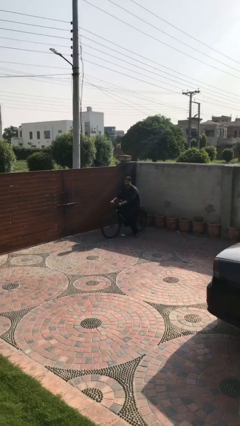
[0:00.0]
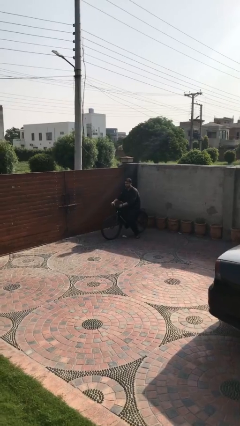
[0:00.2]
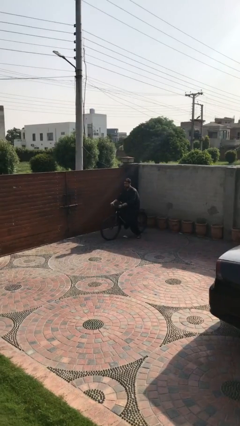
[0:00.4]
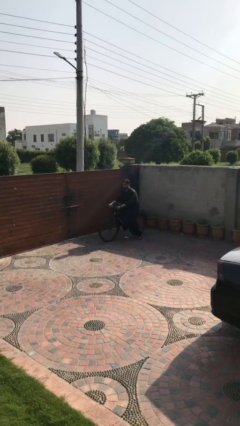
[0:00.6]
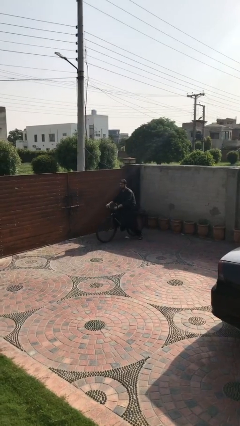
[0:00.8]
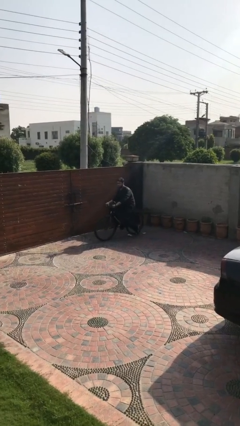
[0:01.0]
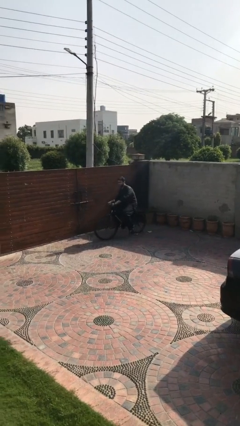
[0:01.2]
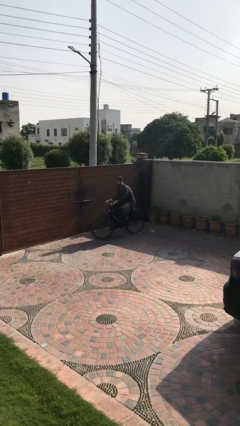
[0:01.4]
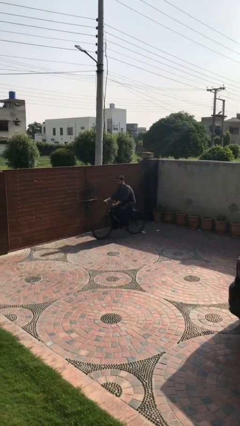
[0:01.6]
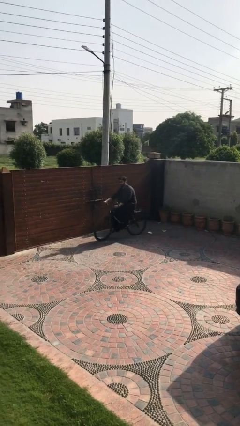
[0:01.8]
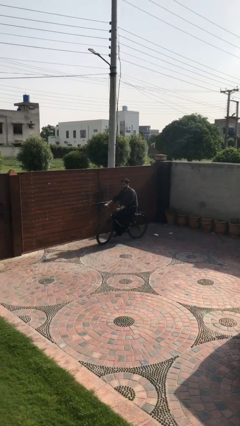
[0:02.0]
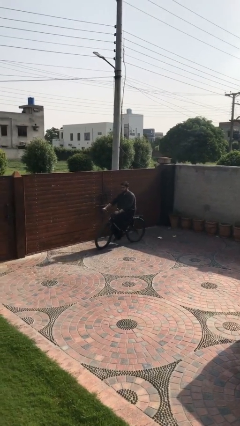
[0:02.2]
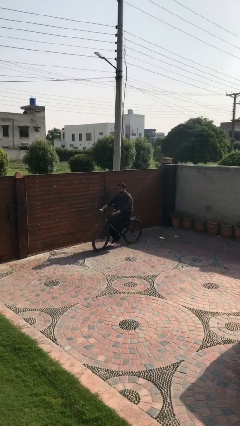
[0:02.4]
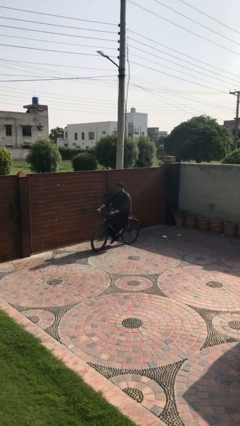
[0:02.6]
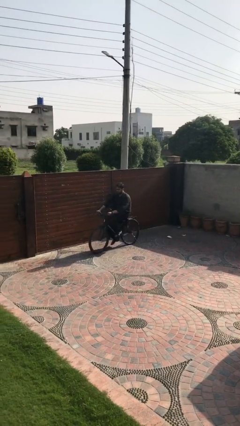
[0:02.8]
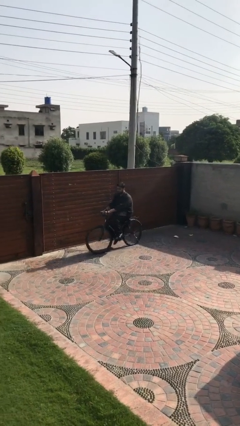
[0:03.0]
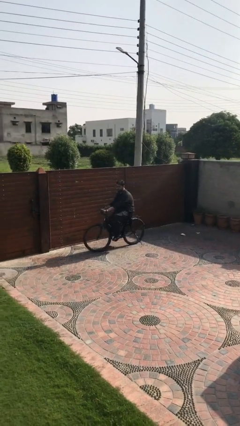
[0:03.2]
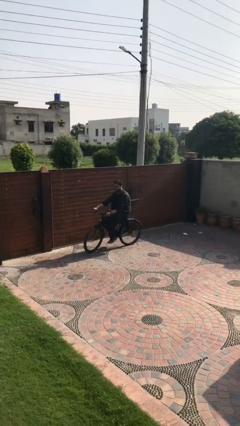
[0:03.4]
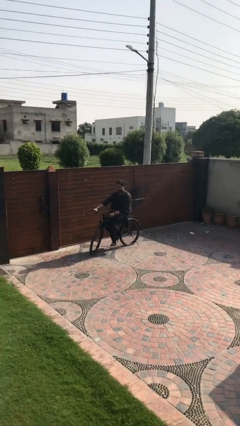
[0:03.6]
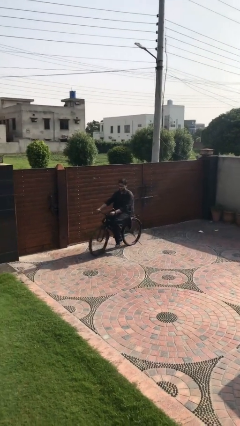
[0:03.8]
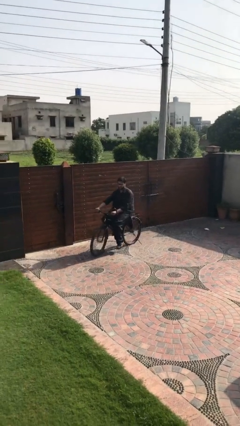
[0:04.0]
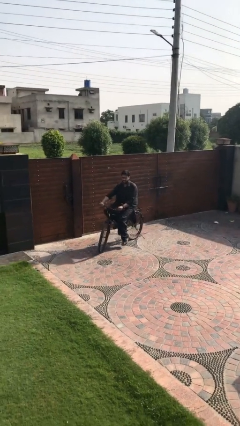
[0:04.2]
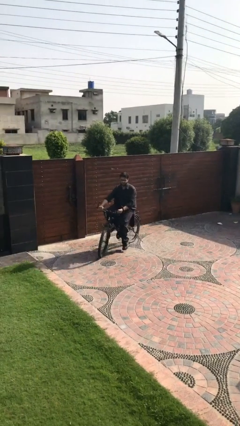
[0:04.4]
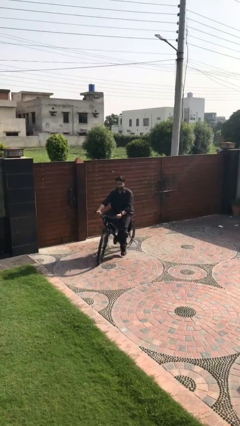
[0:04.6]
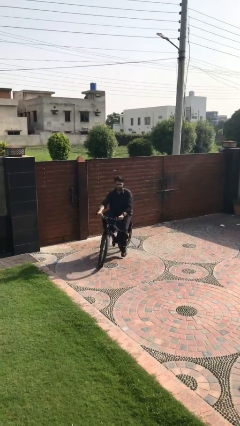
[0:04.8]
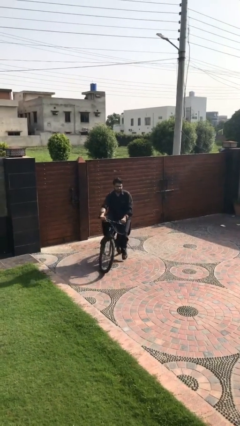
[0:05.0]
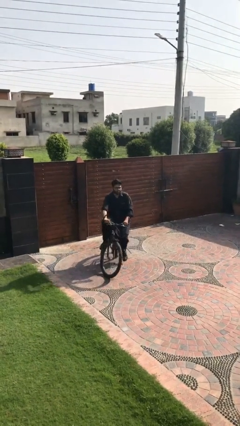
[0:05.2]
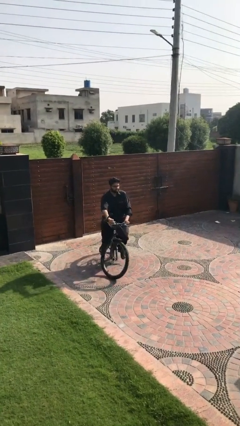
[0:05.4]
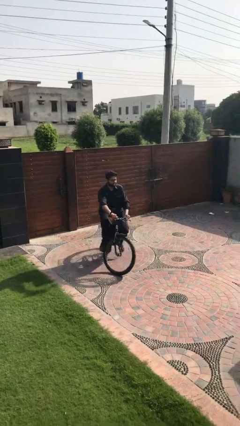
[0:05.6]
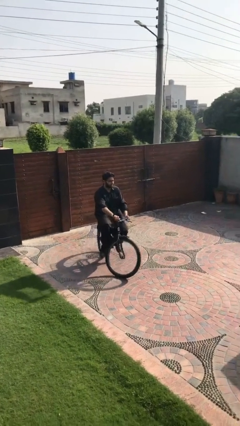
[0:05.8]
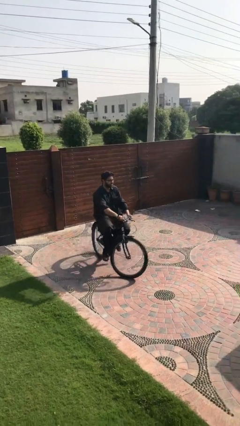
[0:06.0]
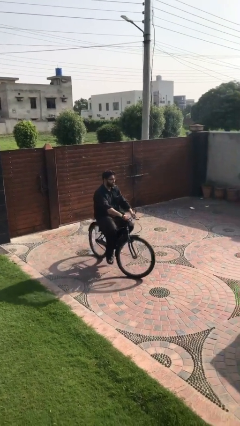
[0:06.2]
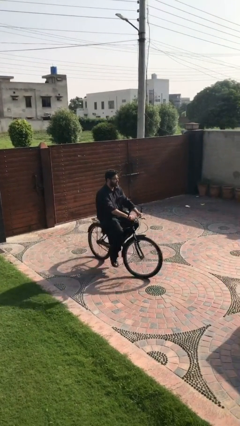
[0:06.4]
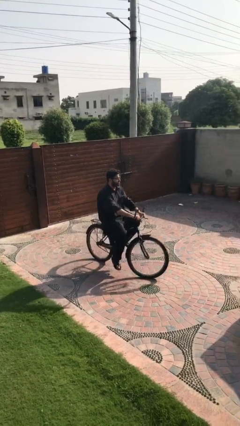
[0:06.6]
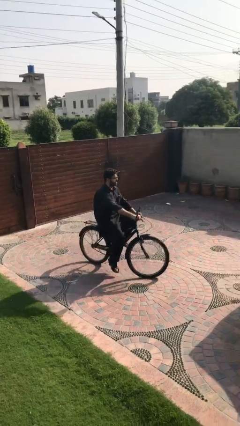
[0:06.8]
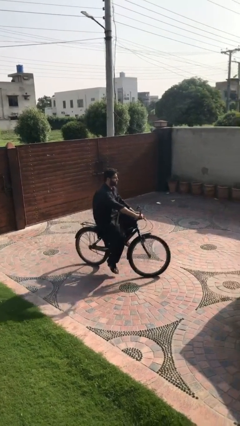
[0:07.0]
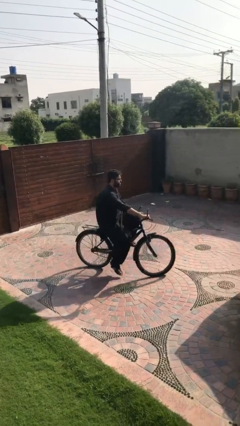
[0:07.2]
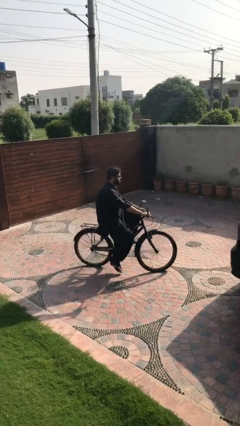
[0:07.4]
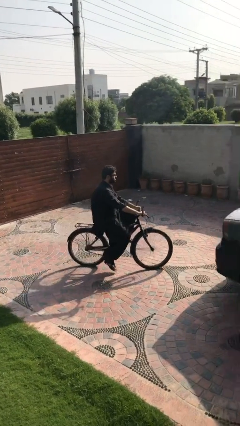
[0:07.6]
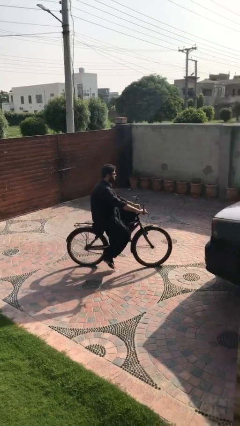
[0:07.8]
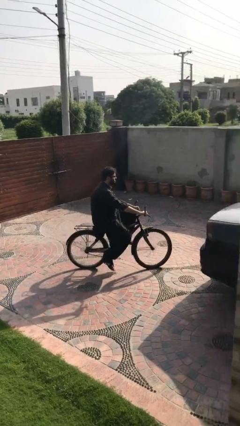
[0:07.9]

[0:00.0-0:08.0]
person rides bicycle

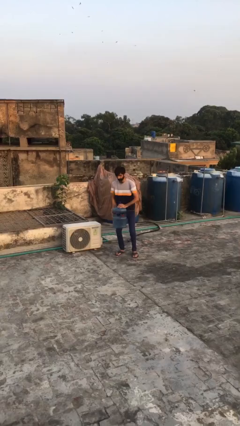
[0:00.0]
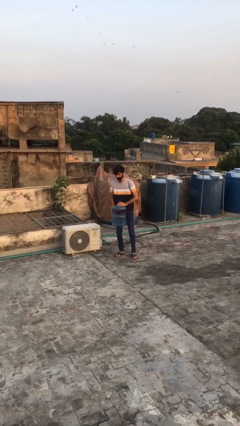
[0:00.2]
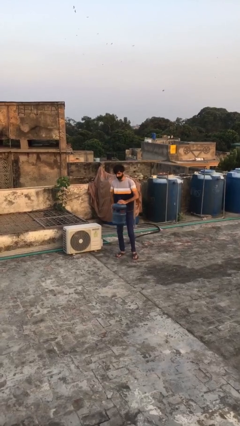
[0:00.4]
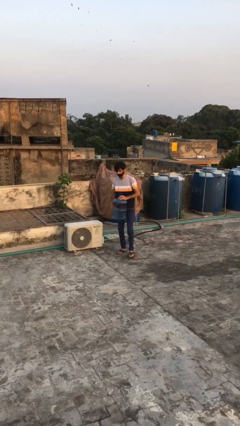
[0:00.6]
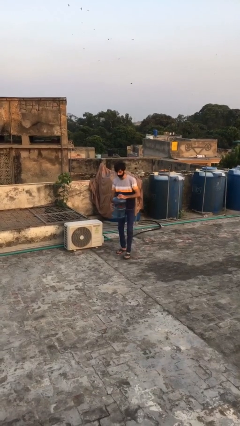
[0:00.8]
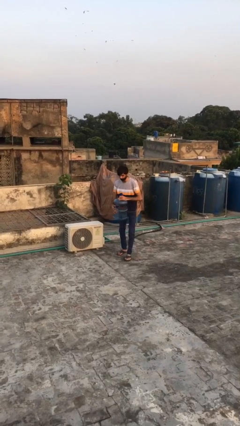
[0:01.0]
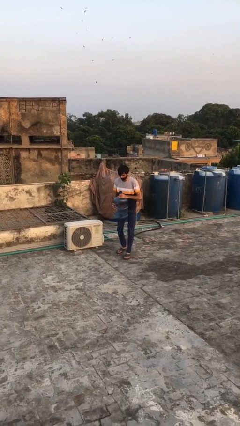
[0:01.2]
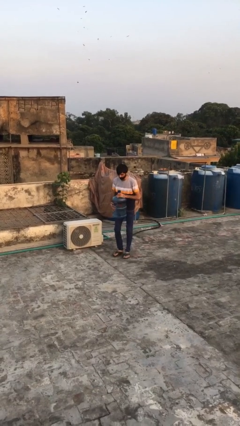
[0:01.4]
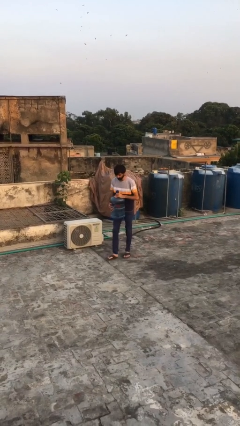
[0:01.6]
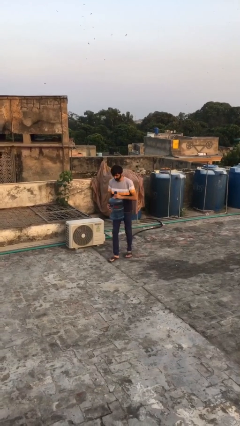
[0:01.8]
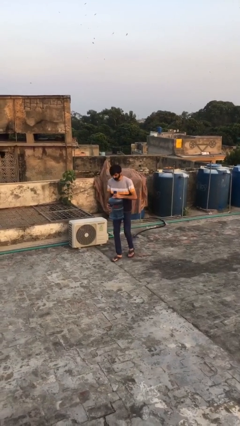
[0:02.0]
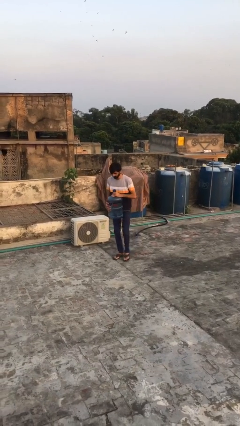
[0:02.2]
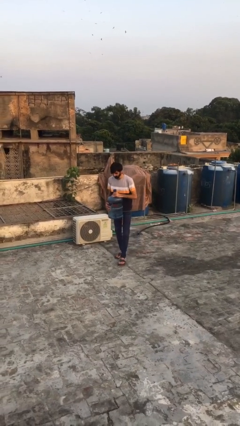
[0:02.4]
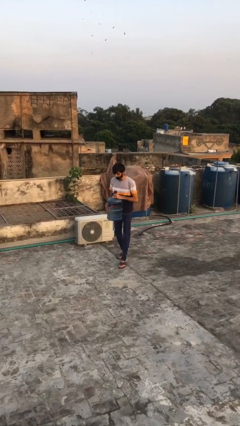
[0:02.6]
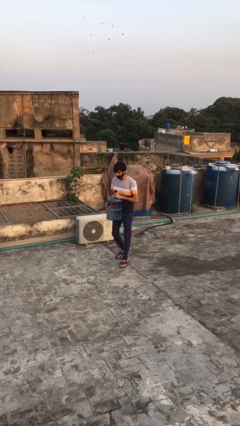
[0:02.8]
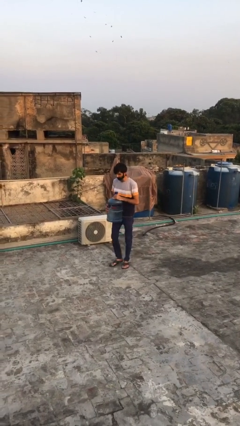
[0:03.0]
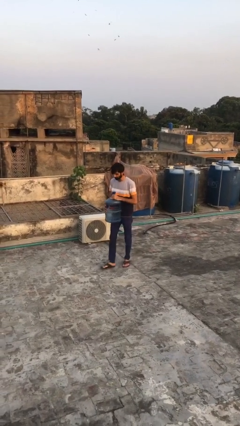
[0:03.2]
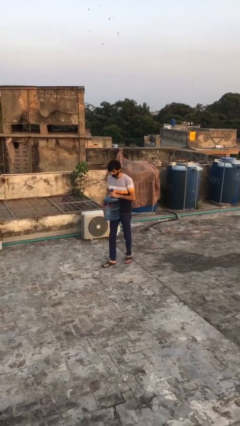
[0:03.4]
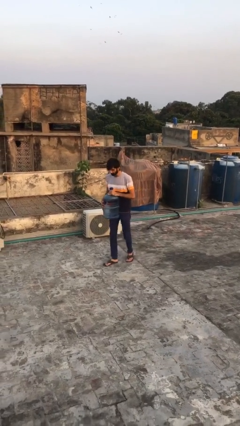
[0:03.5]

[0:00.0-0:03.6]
person carries heavy object

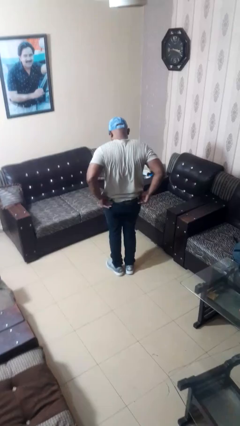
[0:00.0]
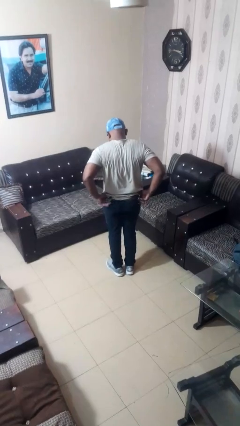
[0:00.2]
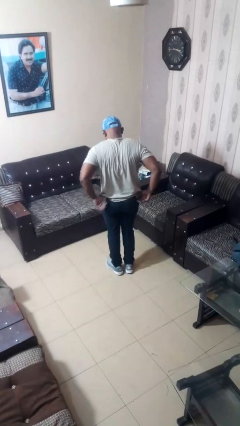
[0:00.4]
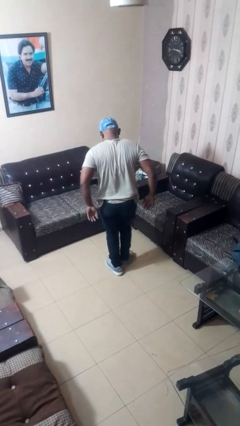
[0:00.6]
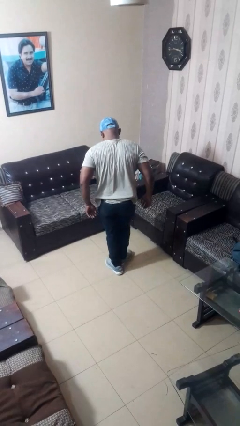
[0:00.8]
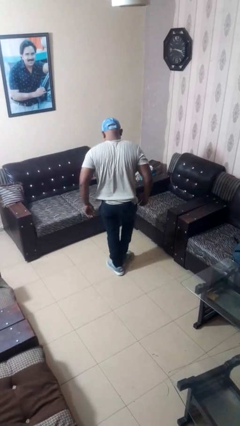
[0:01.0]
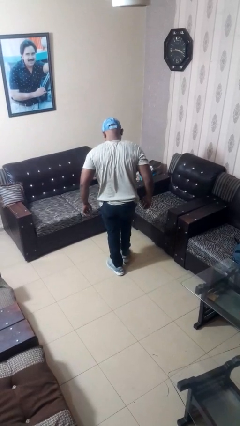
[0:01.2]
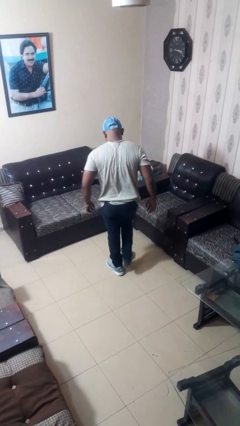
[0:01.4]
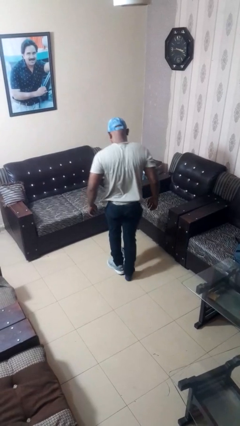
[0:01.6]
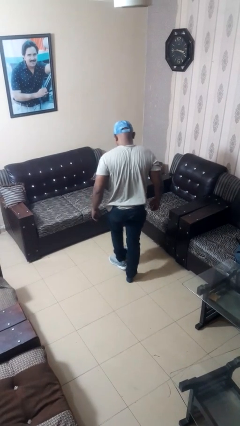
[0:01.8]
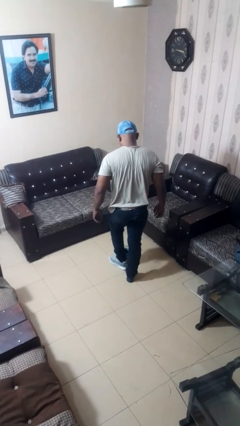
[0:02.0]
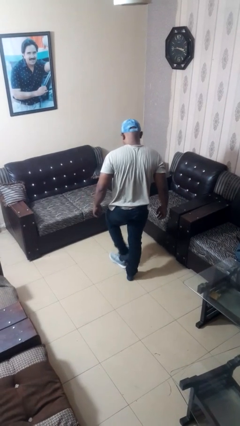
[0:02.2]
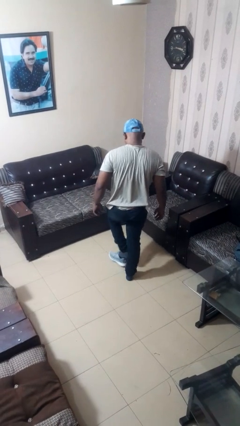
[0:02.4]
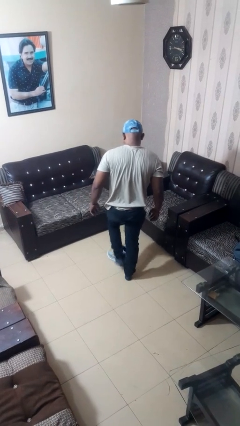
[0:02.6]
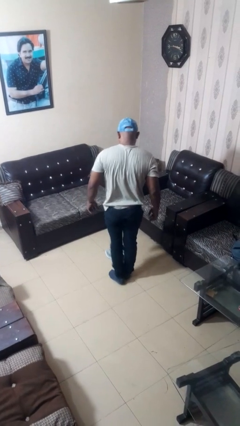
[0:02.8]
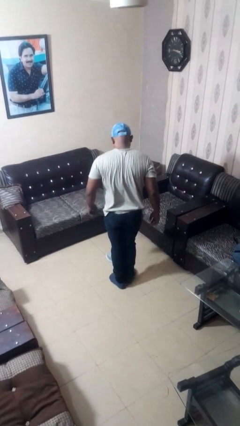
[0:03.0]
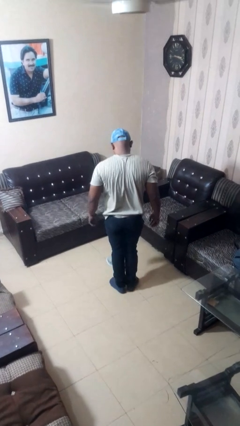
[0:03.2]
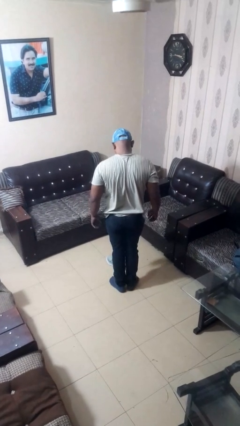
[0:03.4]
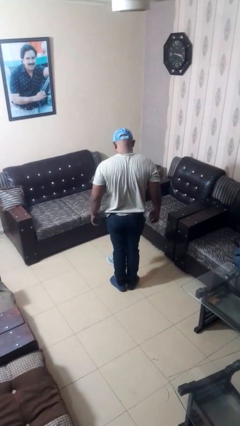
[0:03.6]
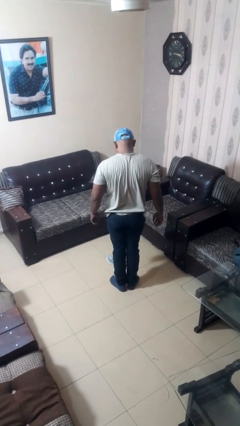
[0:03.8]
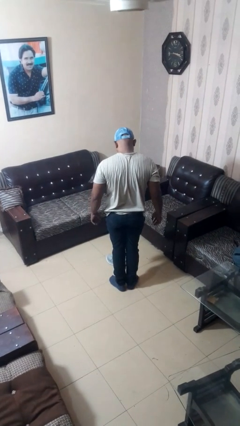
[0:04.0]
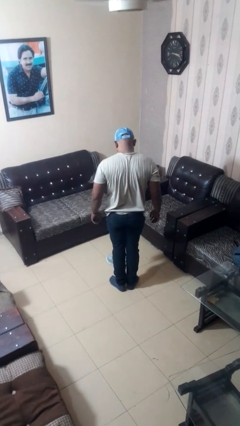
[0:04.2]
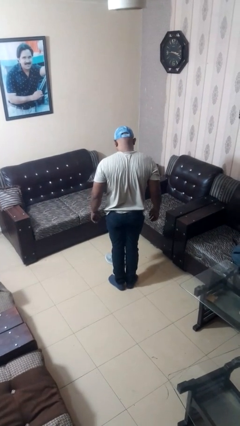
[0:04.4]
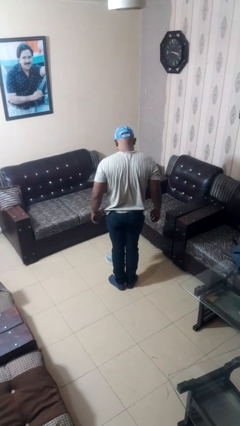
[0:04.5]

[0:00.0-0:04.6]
person takes off shoes

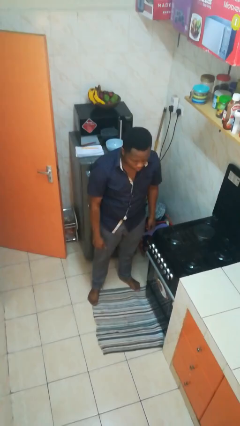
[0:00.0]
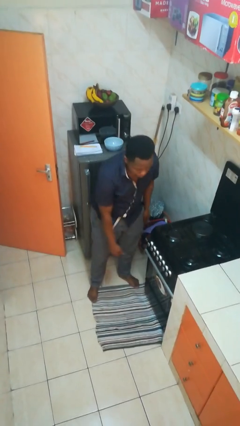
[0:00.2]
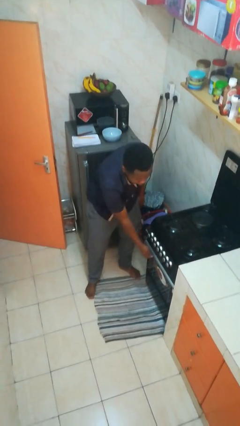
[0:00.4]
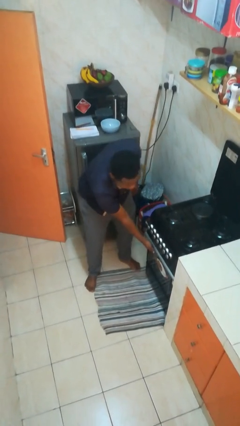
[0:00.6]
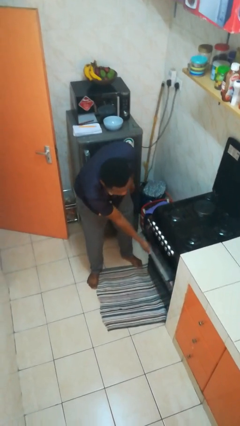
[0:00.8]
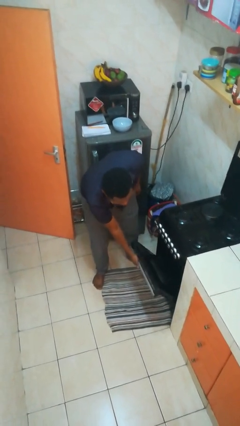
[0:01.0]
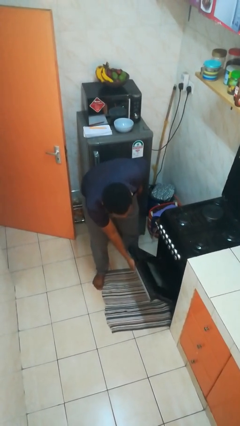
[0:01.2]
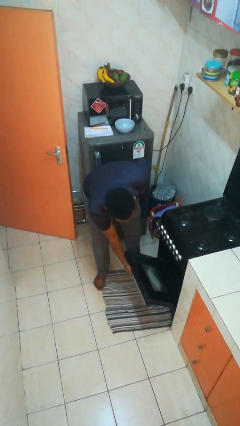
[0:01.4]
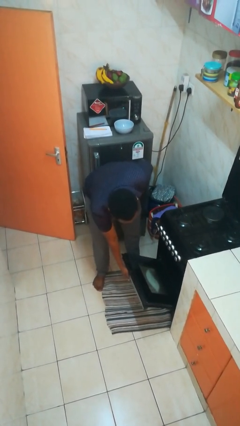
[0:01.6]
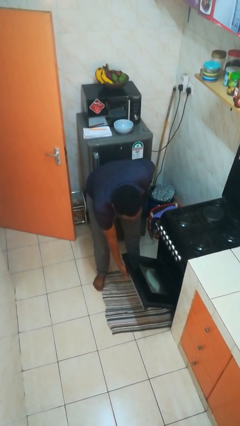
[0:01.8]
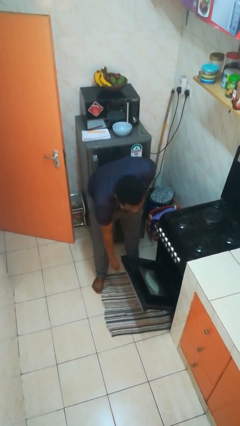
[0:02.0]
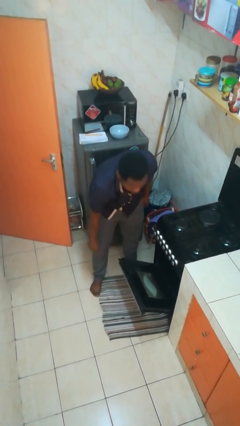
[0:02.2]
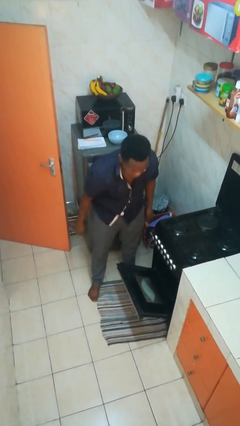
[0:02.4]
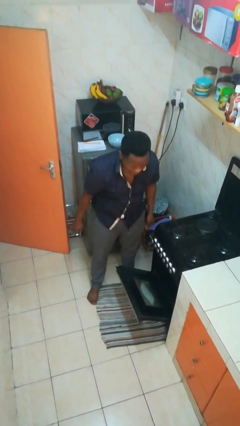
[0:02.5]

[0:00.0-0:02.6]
person opens oven door
